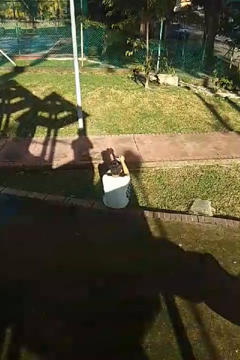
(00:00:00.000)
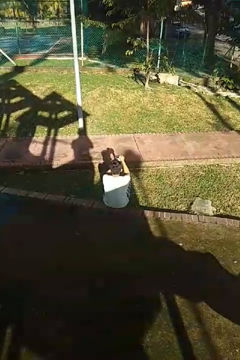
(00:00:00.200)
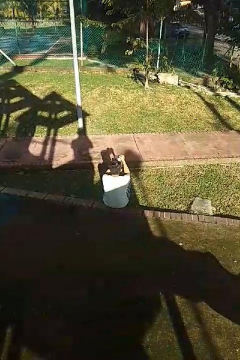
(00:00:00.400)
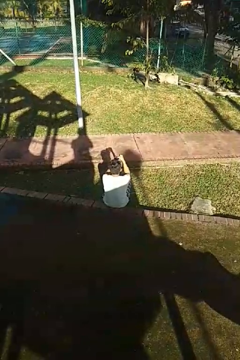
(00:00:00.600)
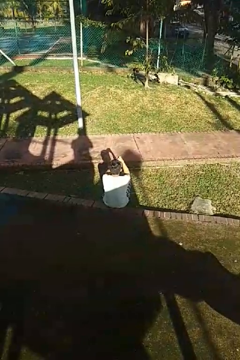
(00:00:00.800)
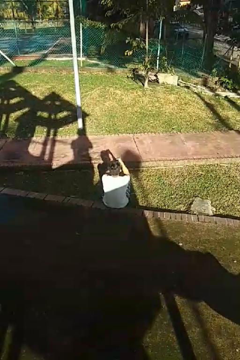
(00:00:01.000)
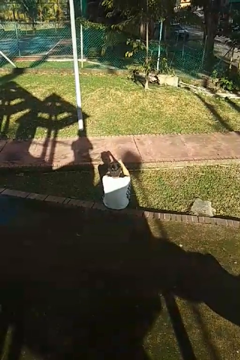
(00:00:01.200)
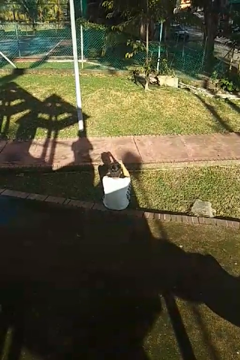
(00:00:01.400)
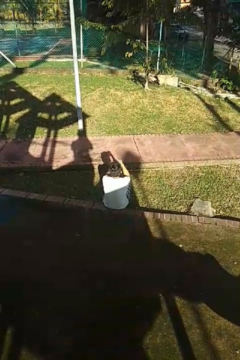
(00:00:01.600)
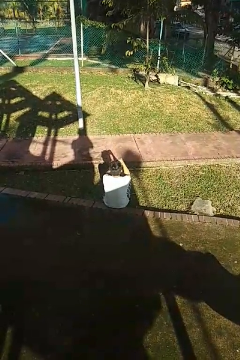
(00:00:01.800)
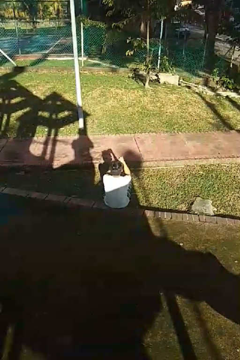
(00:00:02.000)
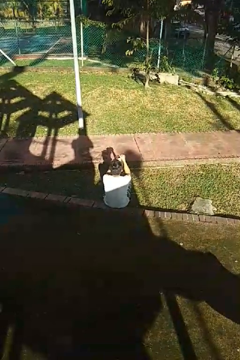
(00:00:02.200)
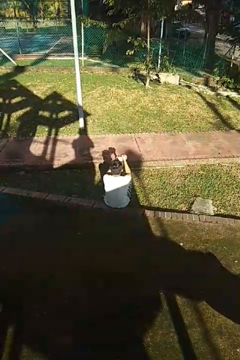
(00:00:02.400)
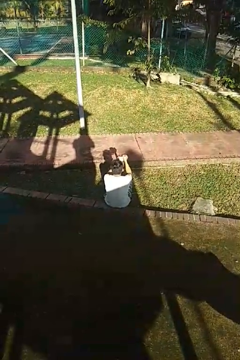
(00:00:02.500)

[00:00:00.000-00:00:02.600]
person drinks from mug

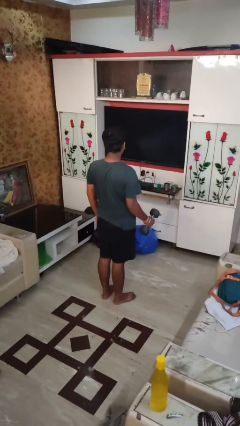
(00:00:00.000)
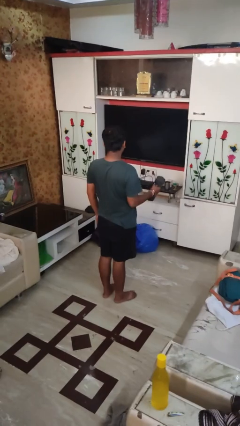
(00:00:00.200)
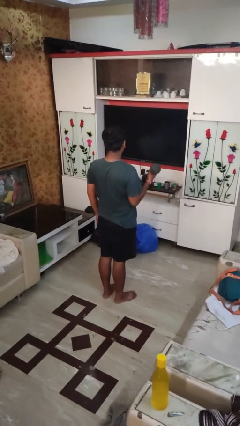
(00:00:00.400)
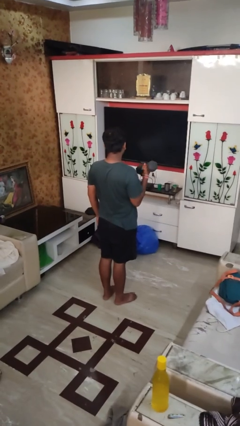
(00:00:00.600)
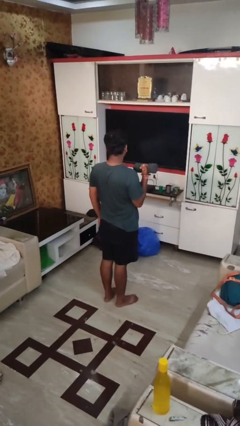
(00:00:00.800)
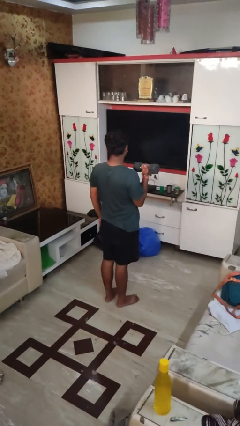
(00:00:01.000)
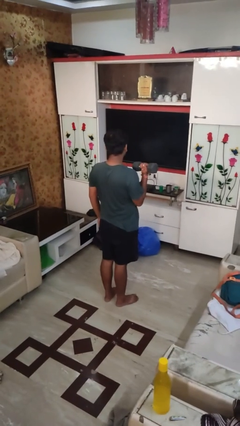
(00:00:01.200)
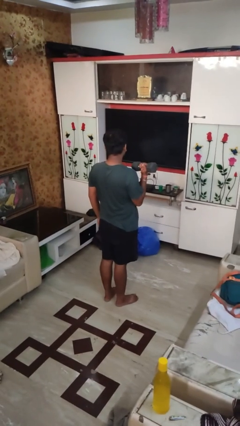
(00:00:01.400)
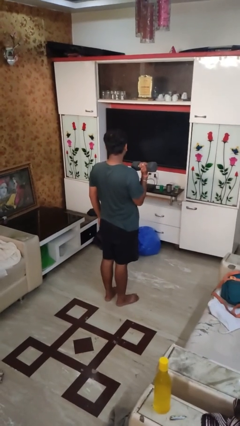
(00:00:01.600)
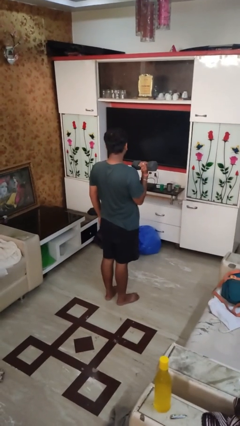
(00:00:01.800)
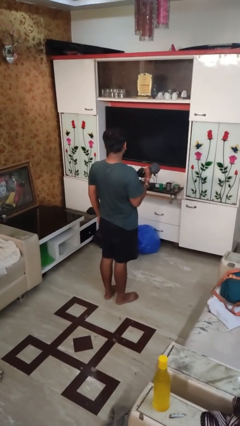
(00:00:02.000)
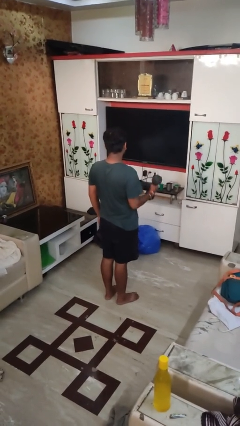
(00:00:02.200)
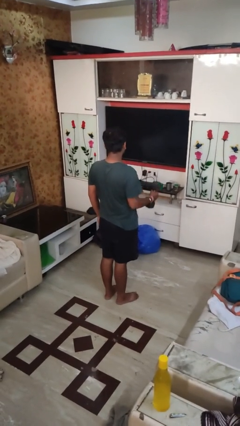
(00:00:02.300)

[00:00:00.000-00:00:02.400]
person lifts dumbbells

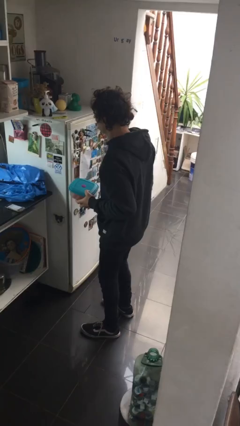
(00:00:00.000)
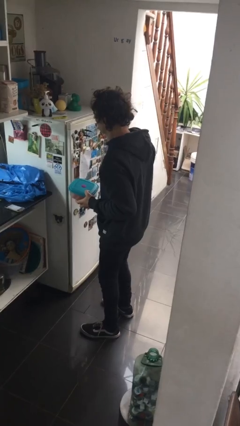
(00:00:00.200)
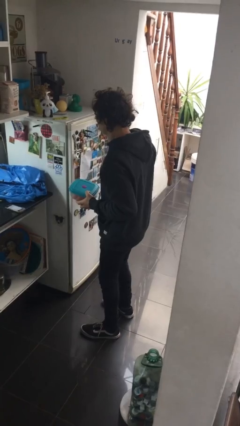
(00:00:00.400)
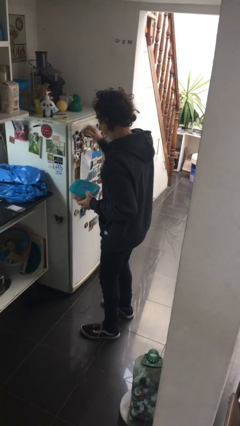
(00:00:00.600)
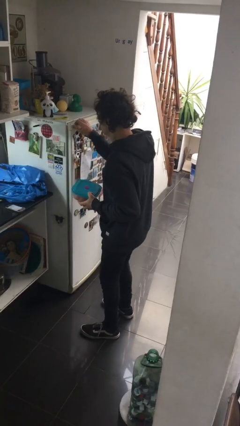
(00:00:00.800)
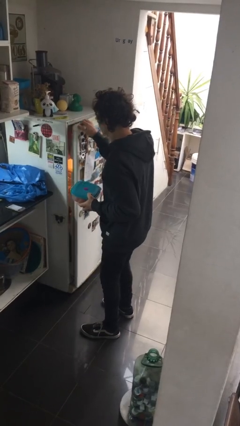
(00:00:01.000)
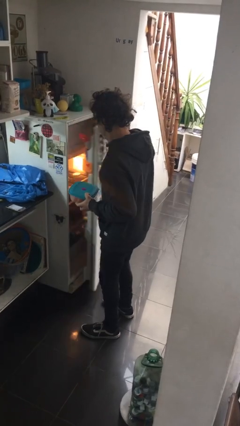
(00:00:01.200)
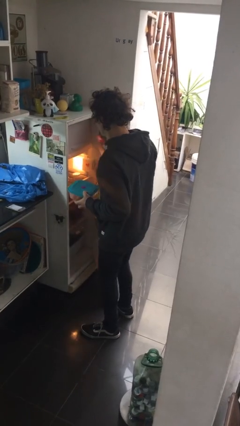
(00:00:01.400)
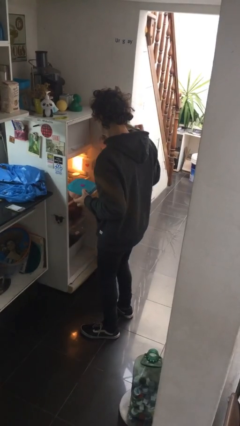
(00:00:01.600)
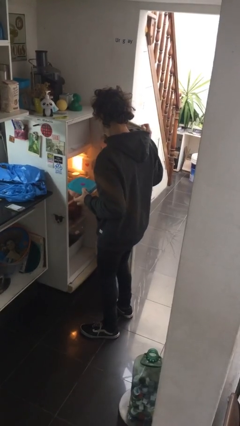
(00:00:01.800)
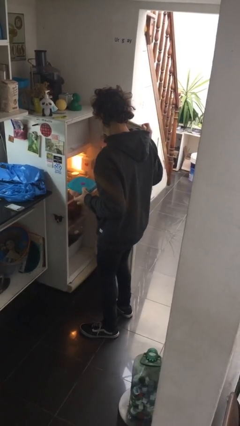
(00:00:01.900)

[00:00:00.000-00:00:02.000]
person opens refrigerator

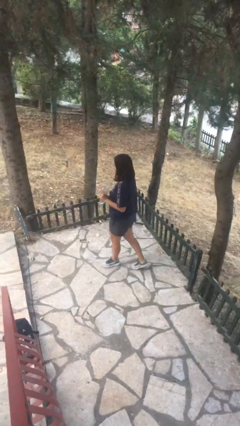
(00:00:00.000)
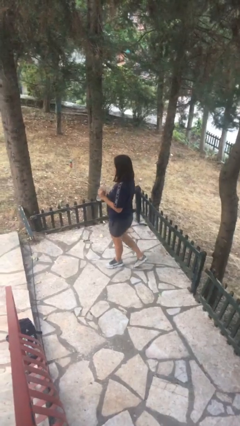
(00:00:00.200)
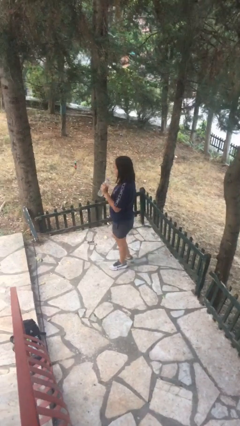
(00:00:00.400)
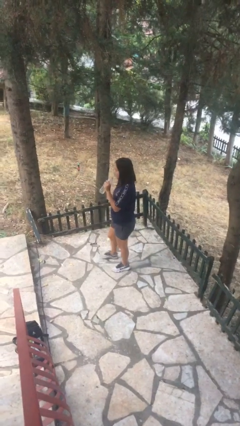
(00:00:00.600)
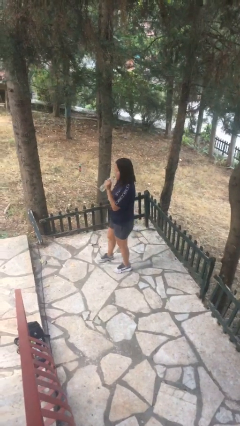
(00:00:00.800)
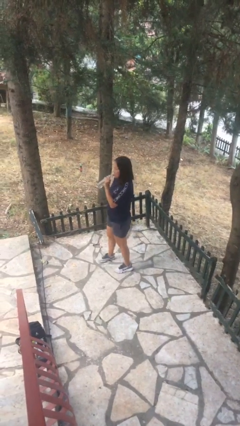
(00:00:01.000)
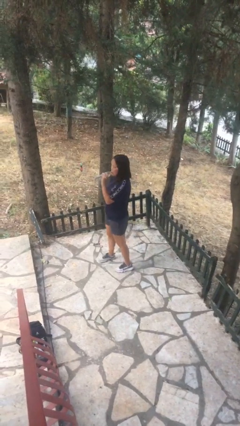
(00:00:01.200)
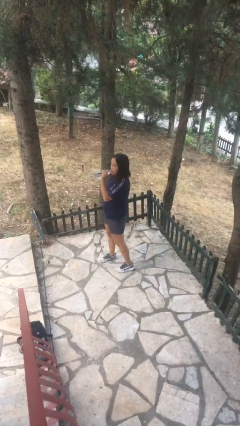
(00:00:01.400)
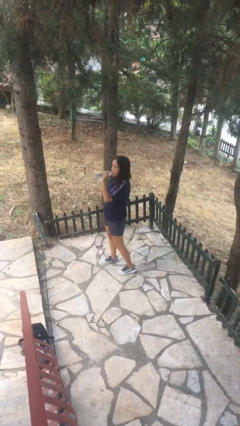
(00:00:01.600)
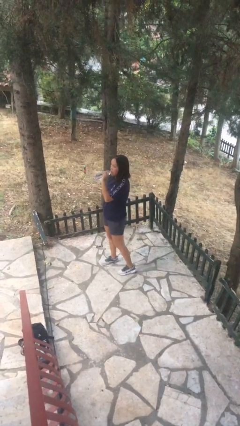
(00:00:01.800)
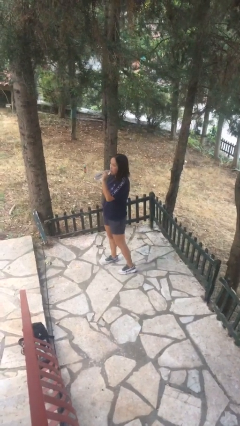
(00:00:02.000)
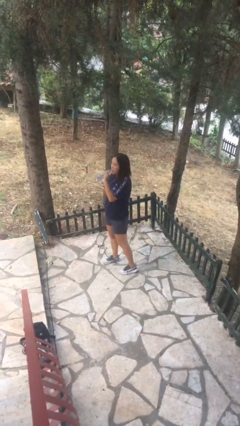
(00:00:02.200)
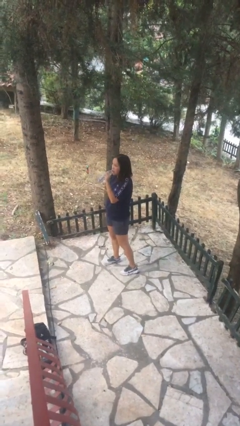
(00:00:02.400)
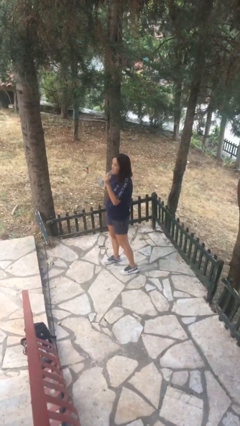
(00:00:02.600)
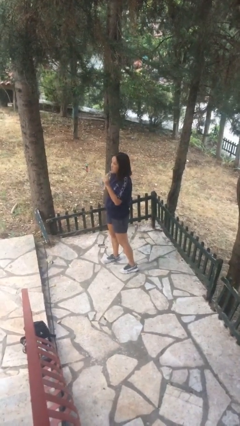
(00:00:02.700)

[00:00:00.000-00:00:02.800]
person drinks from bottle

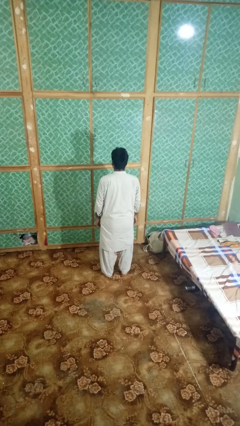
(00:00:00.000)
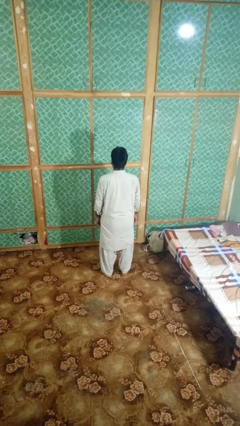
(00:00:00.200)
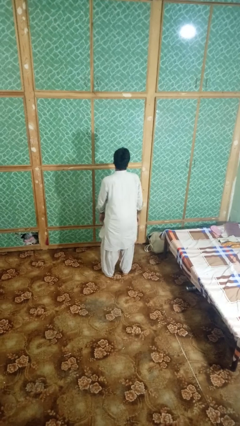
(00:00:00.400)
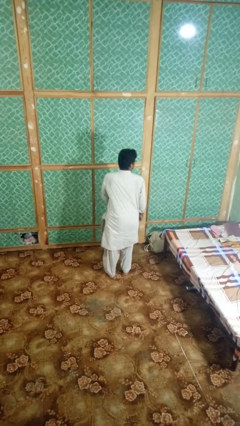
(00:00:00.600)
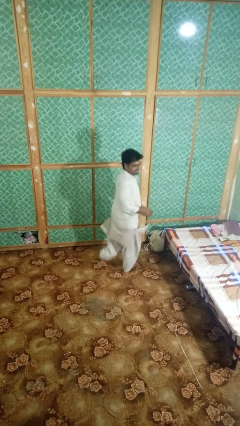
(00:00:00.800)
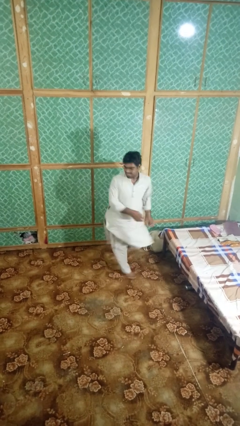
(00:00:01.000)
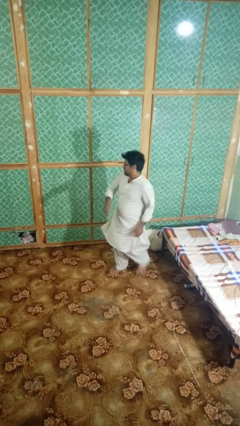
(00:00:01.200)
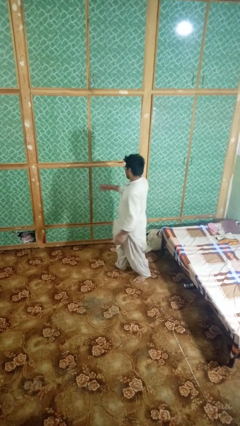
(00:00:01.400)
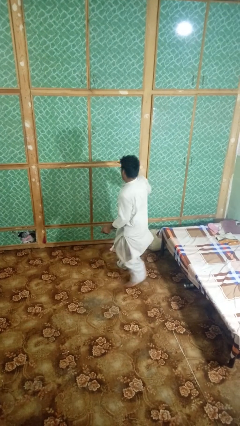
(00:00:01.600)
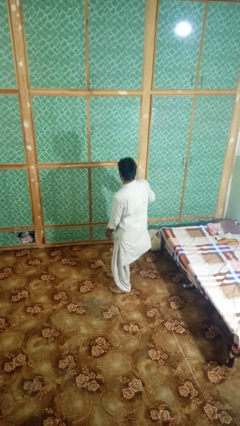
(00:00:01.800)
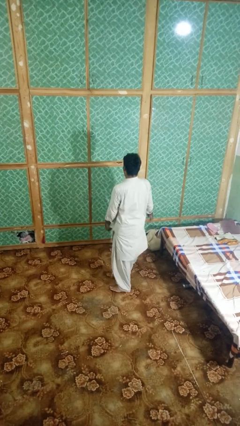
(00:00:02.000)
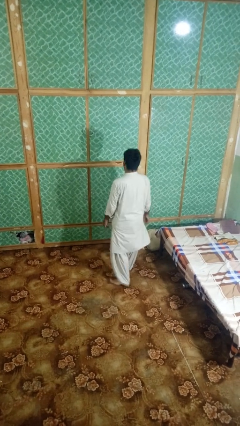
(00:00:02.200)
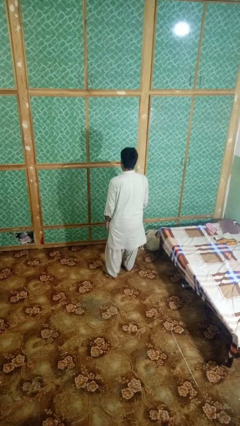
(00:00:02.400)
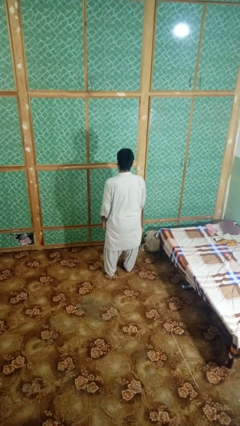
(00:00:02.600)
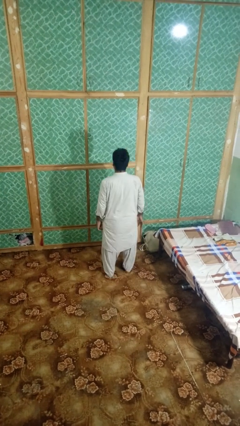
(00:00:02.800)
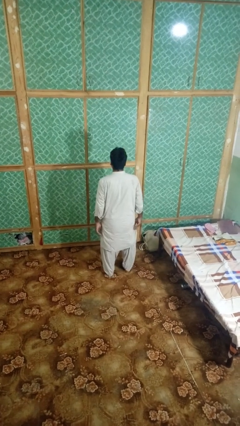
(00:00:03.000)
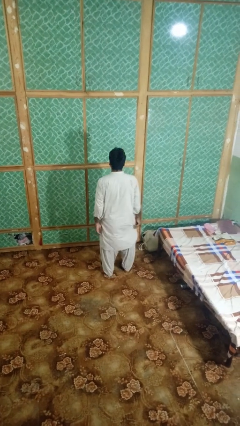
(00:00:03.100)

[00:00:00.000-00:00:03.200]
person twirls

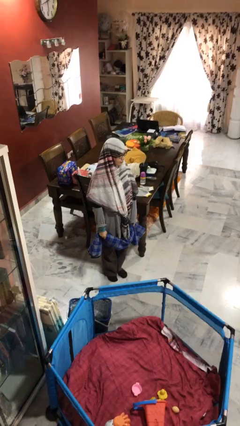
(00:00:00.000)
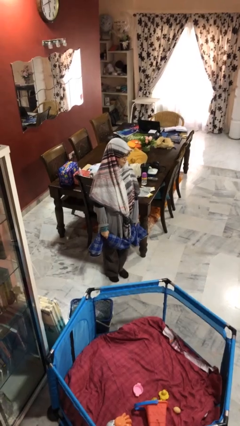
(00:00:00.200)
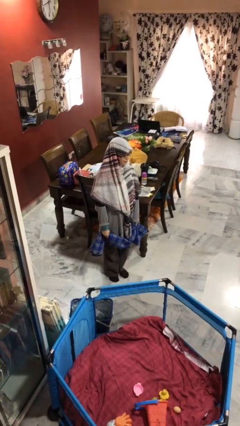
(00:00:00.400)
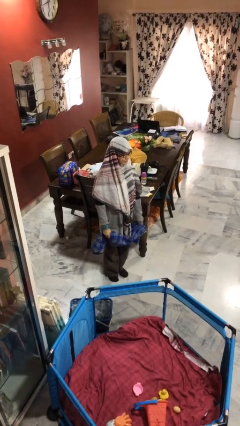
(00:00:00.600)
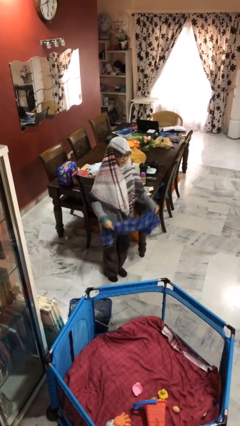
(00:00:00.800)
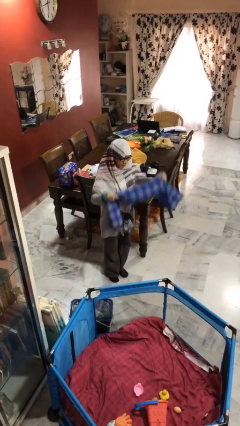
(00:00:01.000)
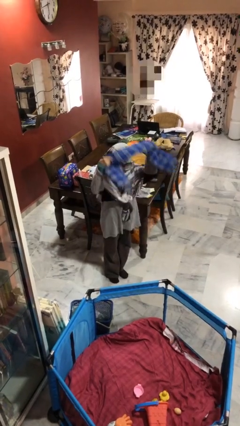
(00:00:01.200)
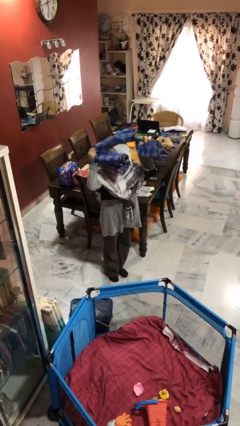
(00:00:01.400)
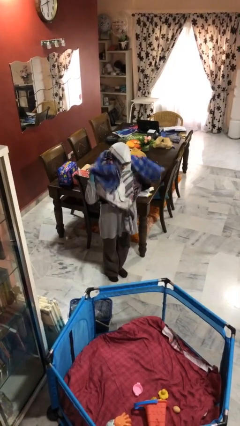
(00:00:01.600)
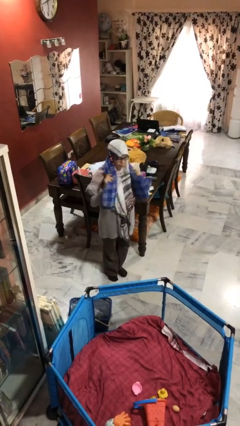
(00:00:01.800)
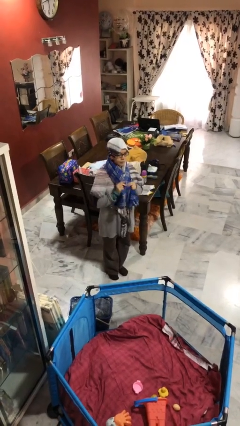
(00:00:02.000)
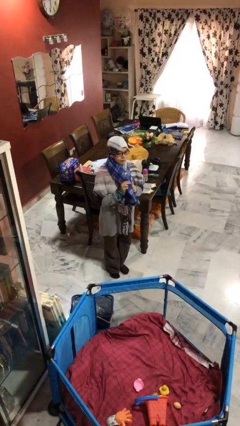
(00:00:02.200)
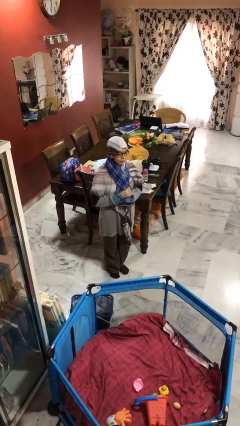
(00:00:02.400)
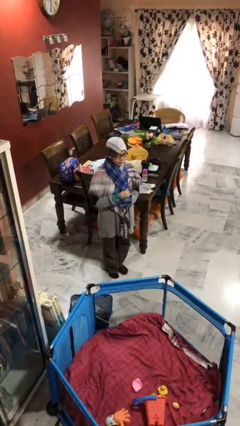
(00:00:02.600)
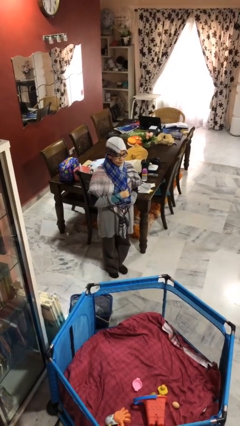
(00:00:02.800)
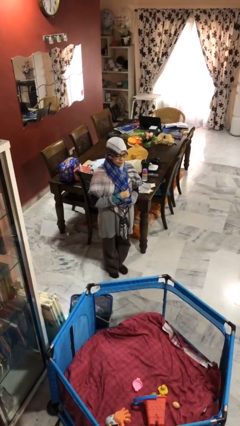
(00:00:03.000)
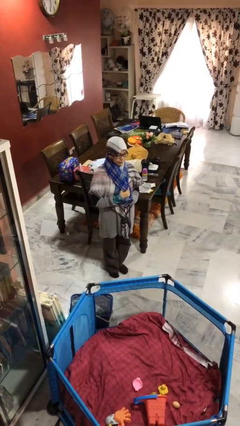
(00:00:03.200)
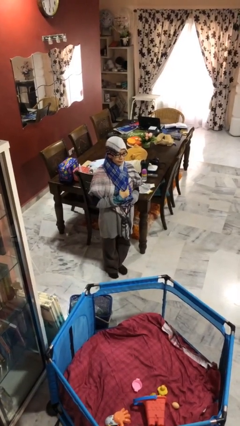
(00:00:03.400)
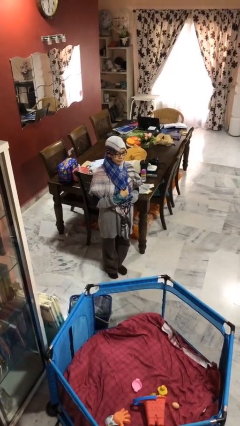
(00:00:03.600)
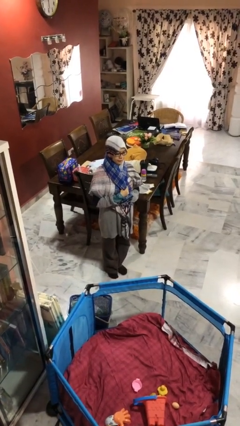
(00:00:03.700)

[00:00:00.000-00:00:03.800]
person puts on scarf

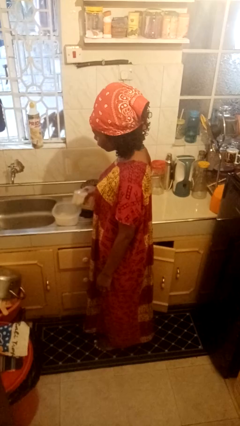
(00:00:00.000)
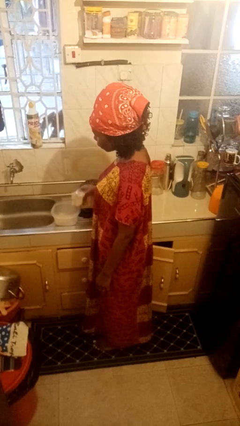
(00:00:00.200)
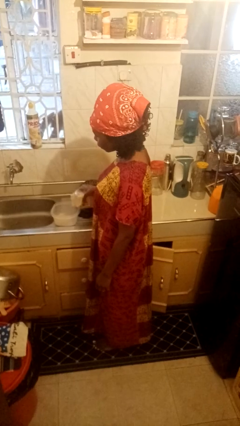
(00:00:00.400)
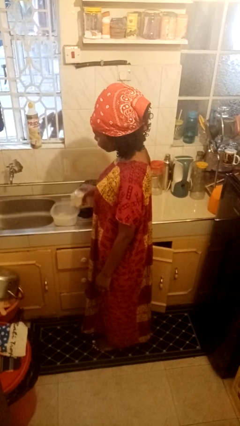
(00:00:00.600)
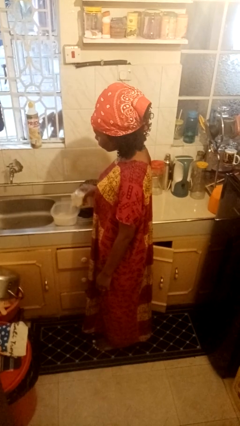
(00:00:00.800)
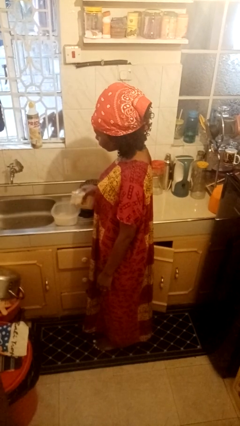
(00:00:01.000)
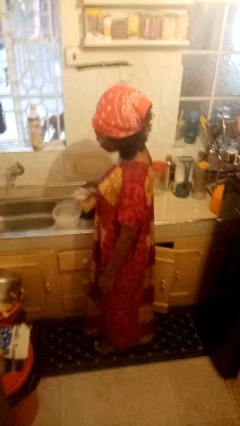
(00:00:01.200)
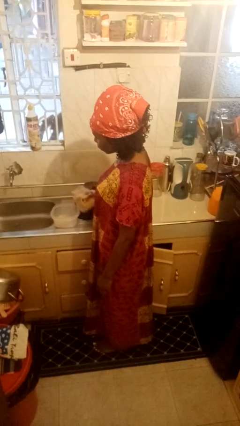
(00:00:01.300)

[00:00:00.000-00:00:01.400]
person pours into bowl
